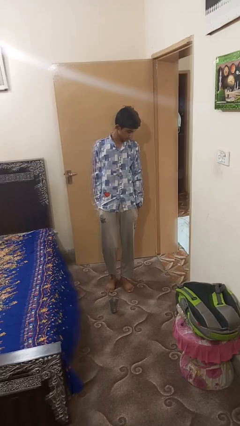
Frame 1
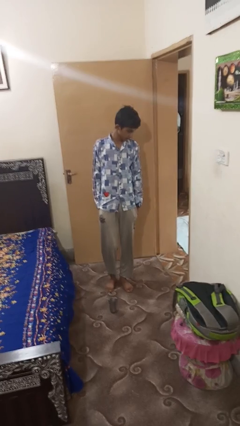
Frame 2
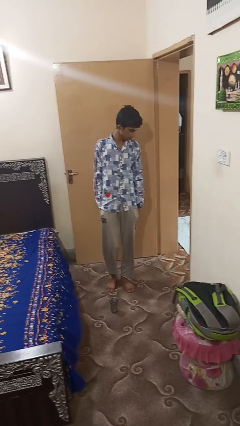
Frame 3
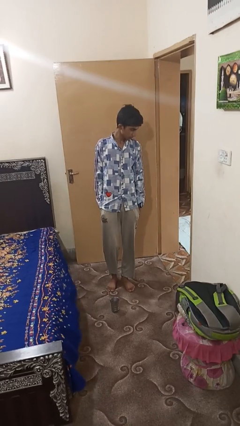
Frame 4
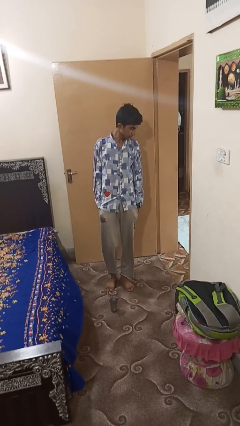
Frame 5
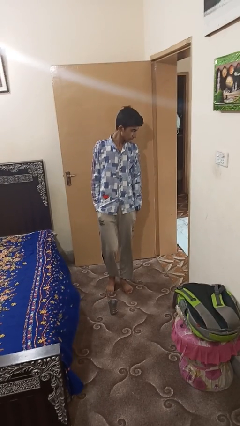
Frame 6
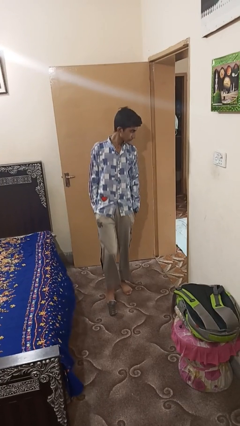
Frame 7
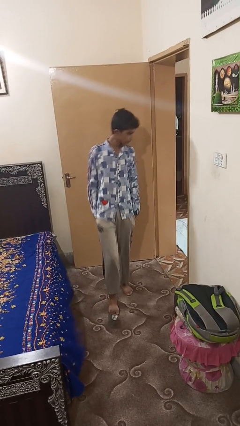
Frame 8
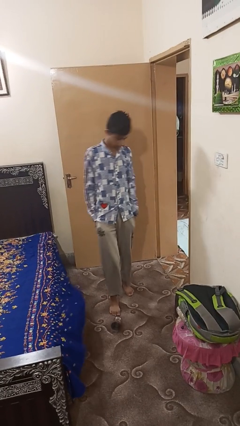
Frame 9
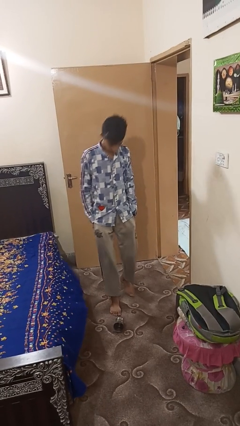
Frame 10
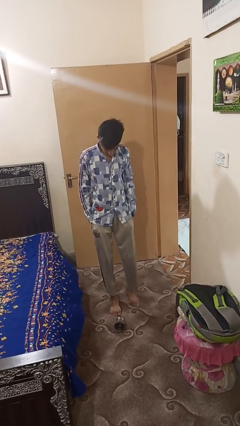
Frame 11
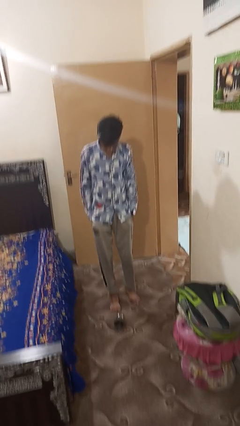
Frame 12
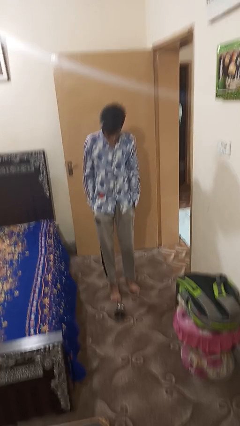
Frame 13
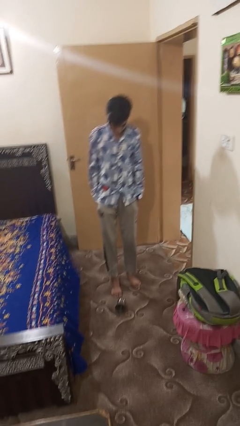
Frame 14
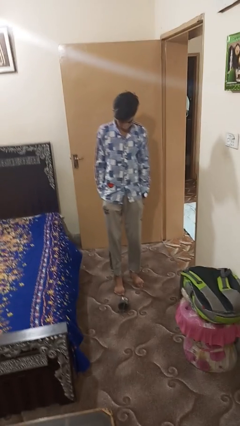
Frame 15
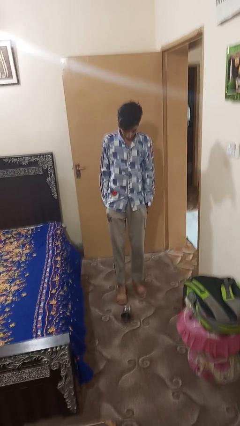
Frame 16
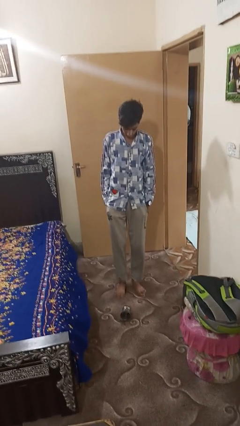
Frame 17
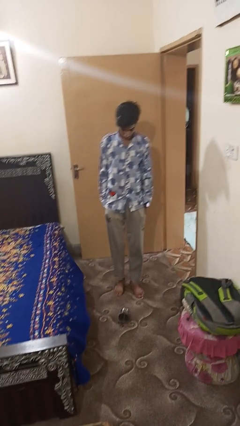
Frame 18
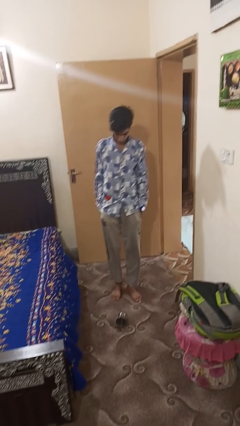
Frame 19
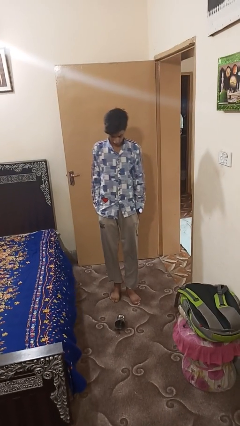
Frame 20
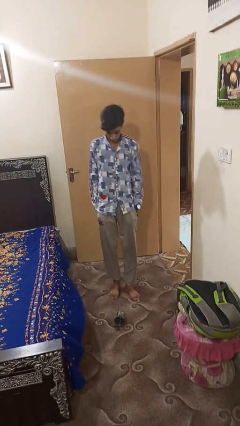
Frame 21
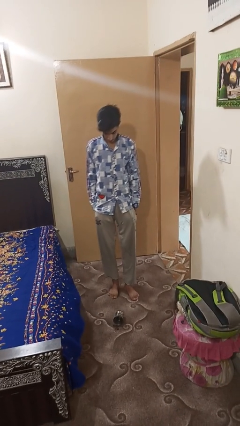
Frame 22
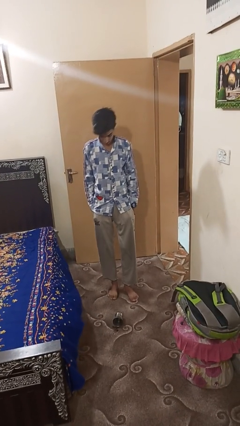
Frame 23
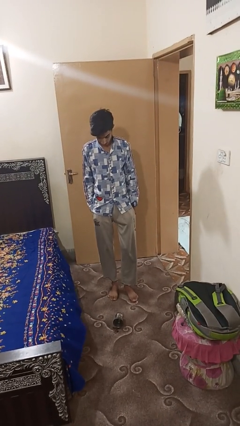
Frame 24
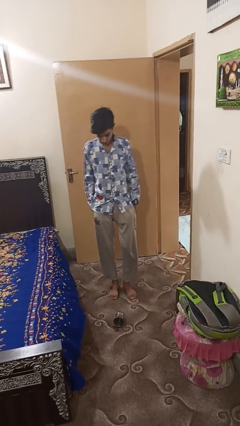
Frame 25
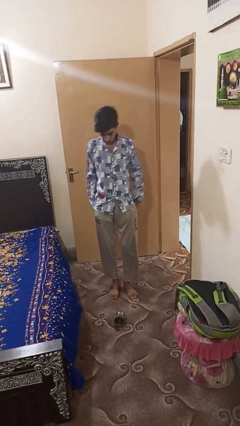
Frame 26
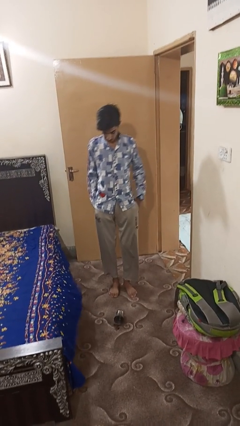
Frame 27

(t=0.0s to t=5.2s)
person spills on floor

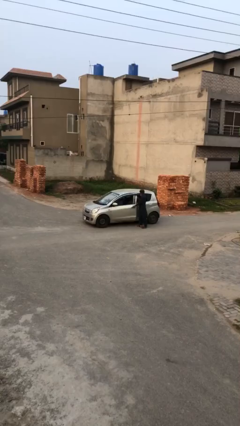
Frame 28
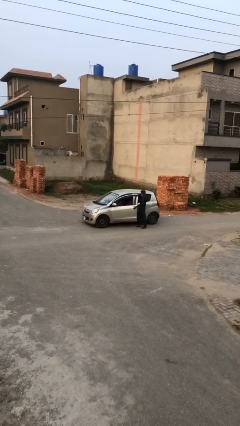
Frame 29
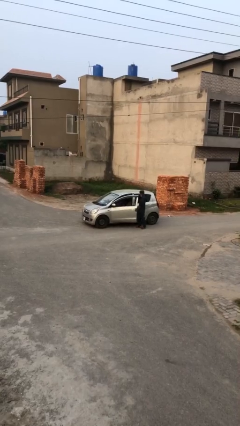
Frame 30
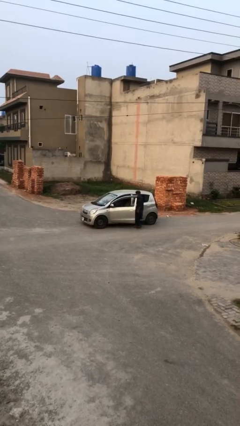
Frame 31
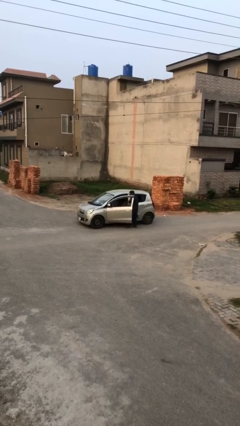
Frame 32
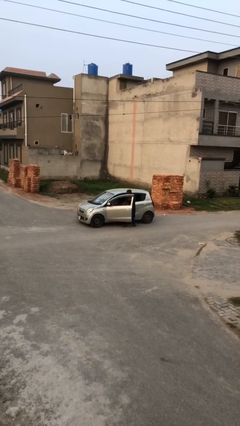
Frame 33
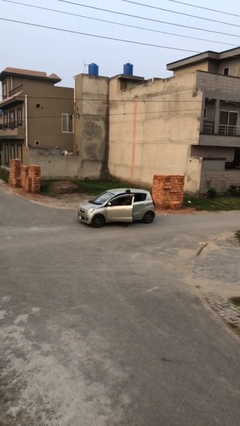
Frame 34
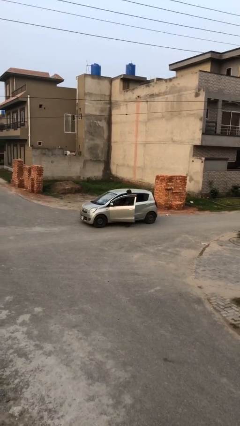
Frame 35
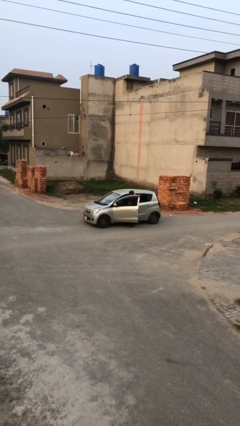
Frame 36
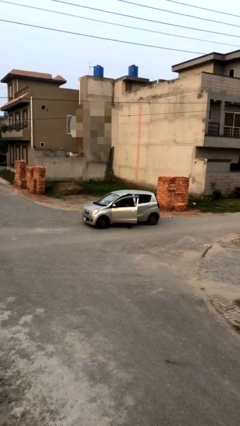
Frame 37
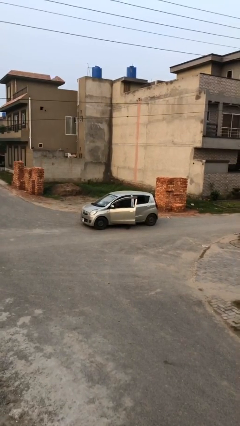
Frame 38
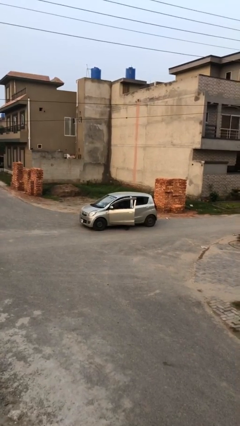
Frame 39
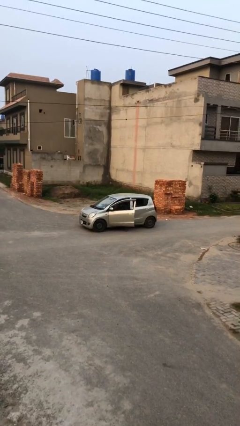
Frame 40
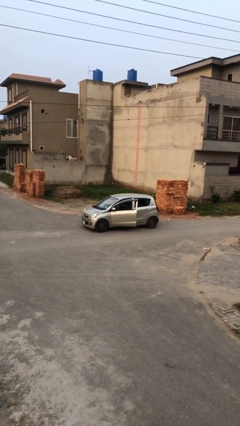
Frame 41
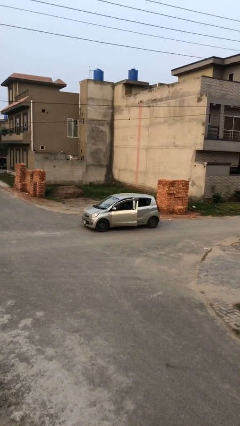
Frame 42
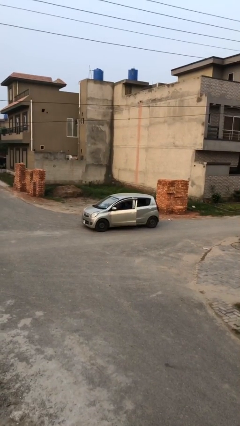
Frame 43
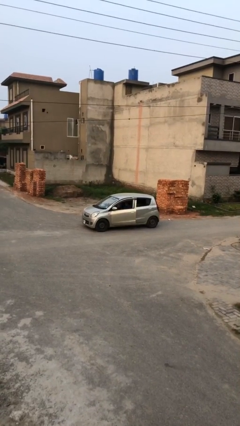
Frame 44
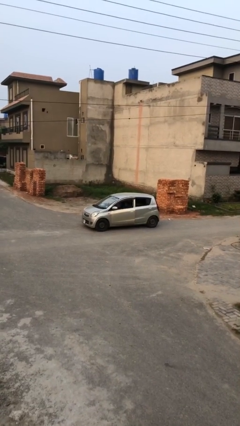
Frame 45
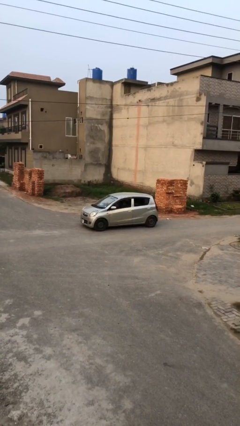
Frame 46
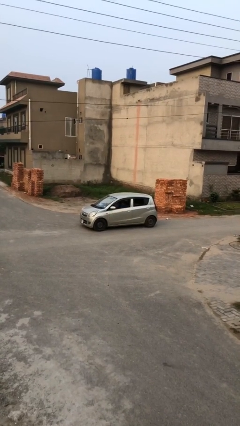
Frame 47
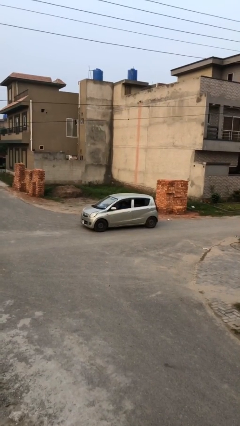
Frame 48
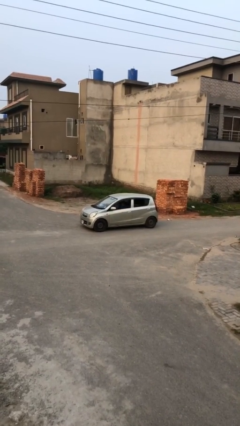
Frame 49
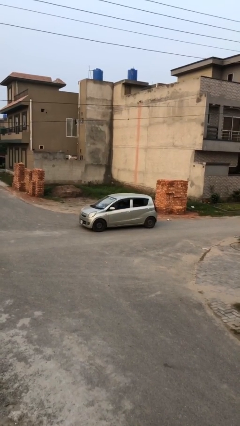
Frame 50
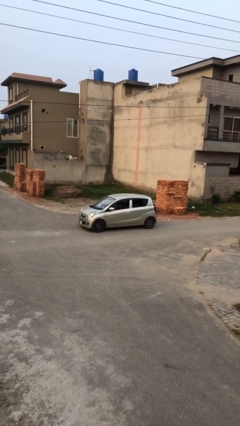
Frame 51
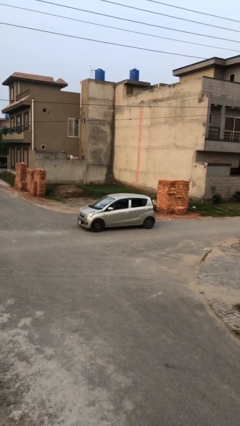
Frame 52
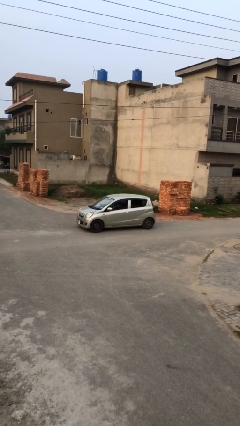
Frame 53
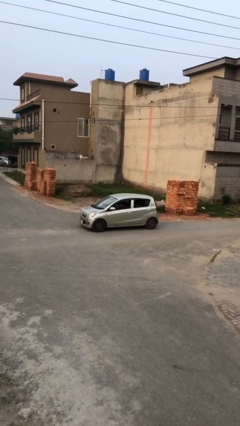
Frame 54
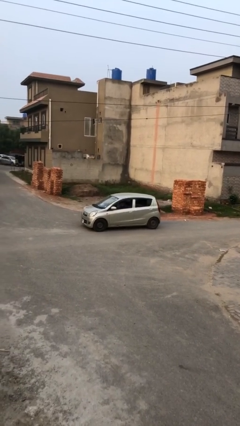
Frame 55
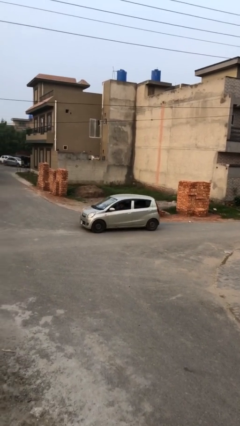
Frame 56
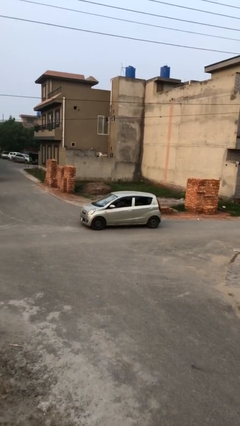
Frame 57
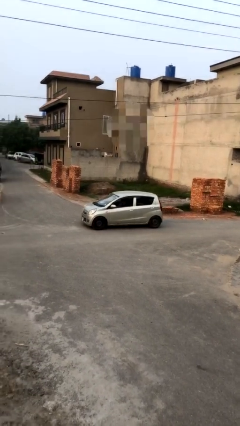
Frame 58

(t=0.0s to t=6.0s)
car picks up person

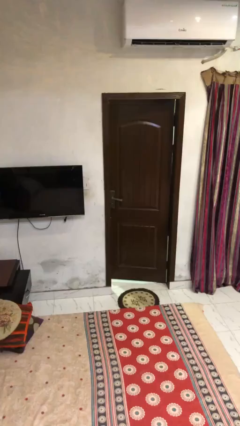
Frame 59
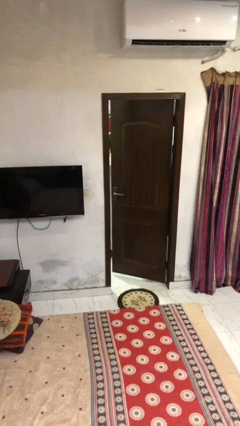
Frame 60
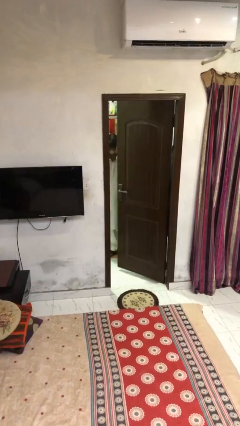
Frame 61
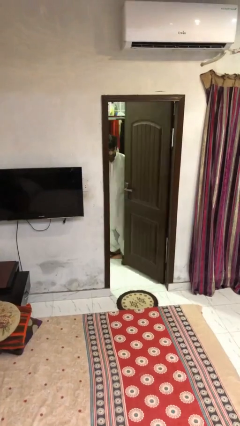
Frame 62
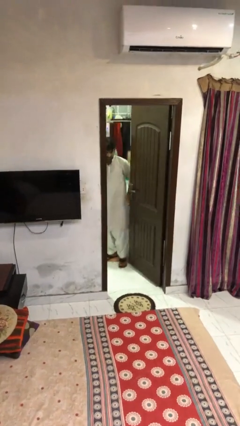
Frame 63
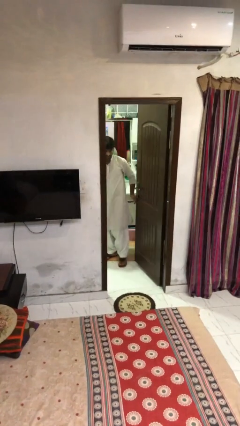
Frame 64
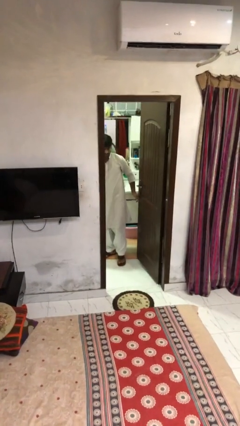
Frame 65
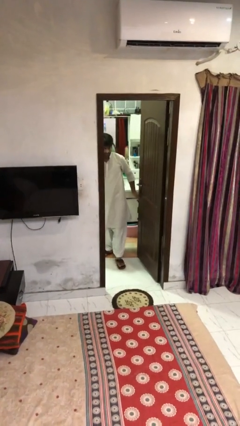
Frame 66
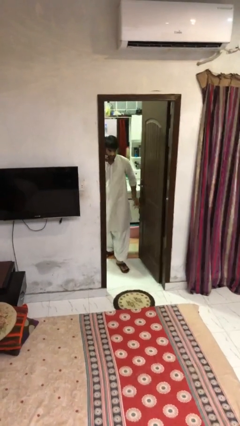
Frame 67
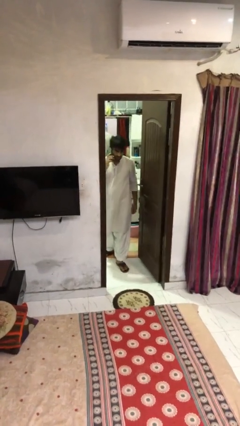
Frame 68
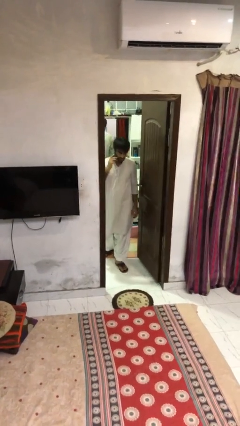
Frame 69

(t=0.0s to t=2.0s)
person opens facility door

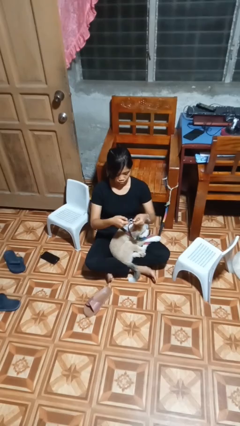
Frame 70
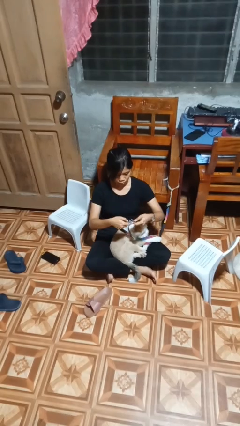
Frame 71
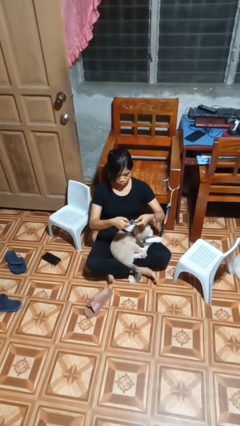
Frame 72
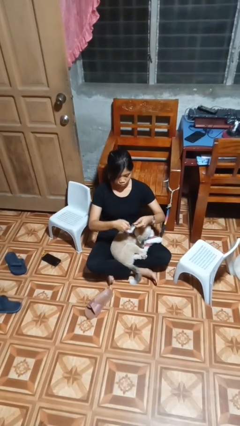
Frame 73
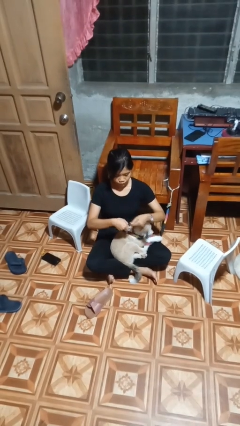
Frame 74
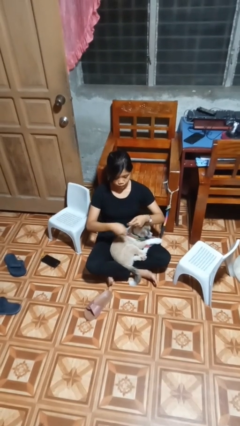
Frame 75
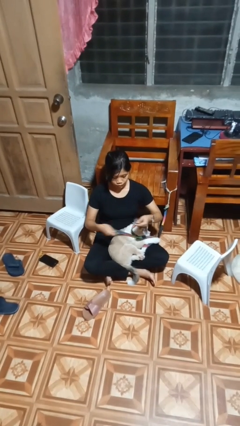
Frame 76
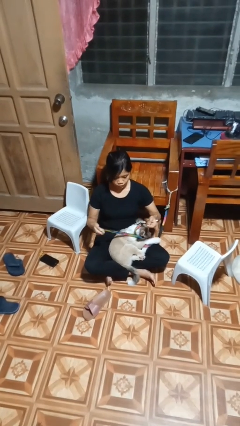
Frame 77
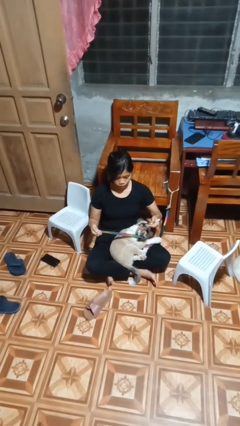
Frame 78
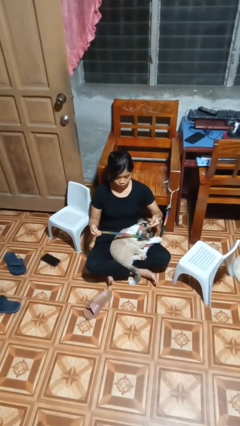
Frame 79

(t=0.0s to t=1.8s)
person unattaches leash from dog

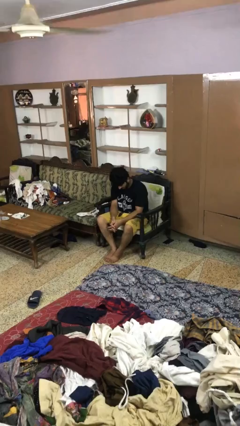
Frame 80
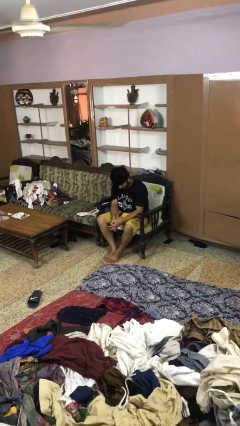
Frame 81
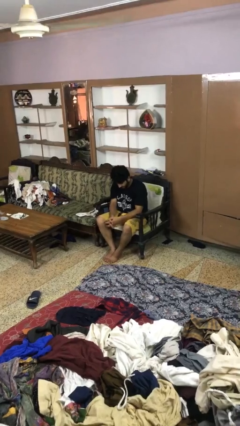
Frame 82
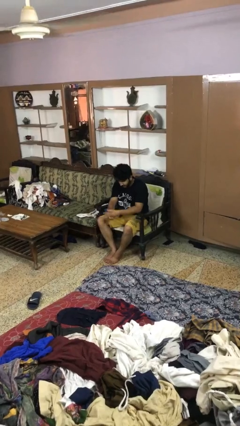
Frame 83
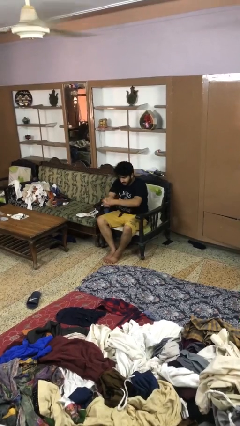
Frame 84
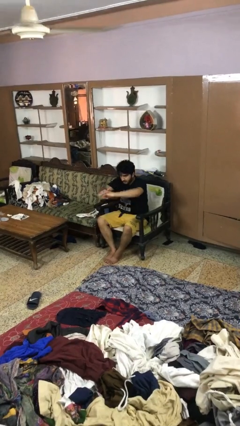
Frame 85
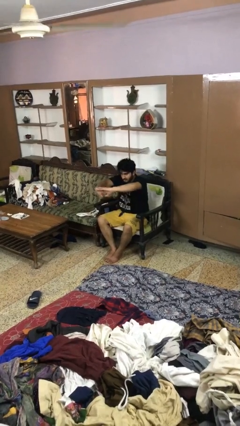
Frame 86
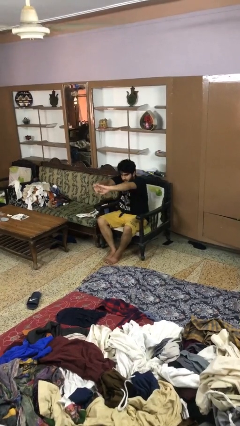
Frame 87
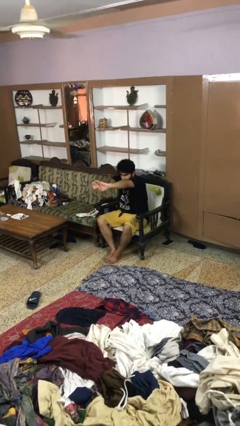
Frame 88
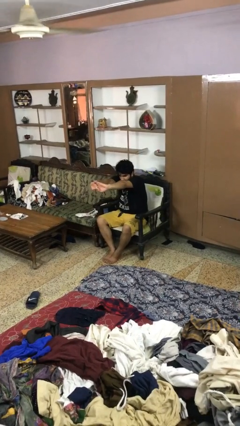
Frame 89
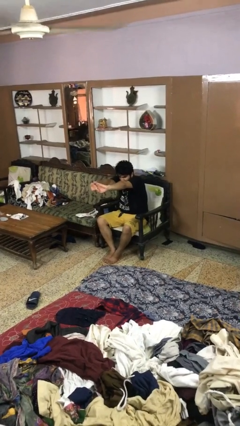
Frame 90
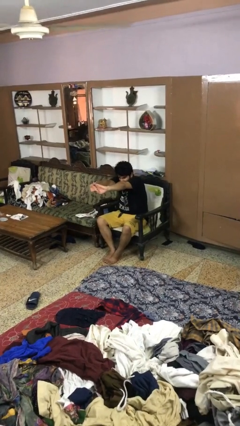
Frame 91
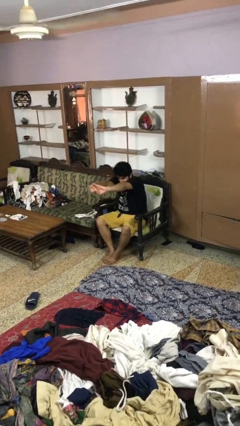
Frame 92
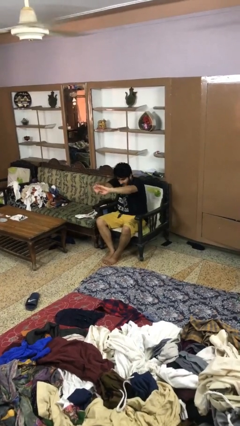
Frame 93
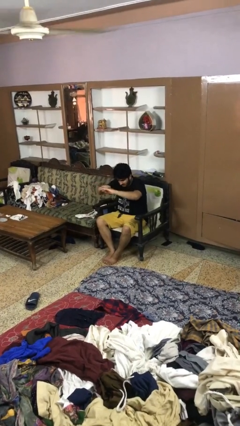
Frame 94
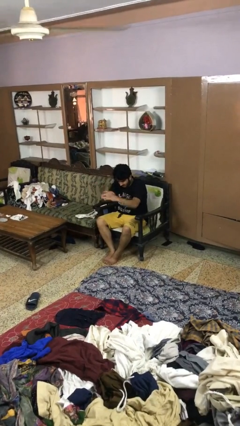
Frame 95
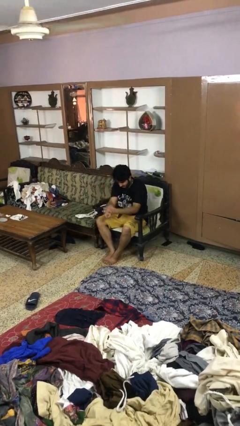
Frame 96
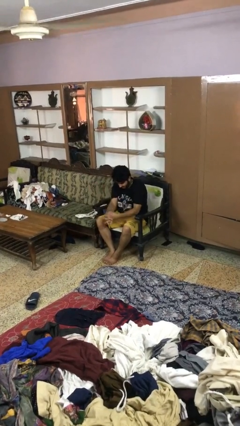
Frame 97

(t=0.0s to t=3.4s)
person cracks knuckles
